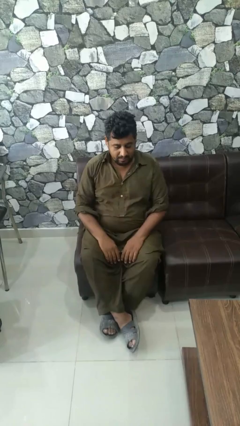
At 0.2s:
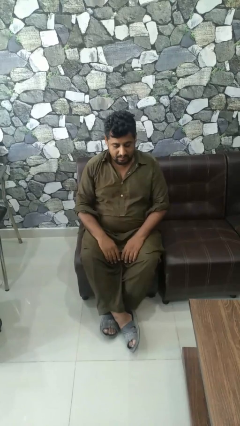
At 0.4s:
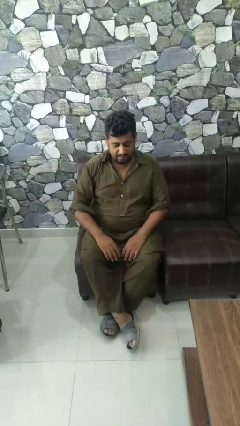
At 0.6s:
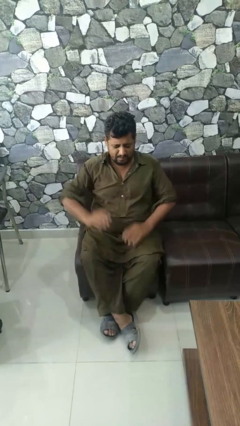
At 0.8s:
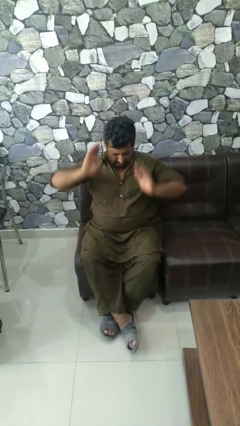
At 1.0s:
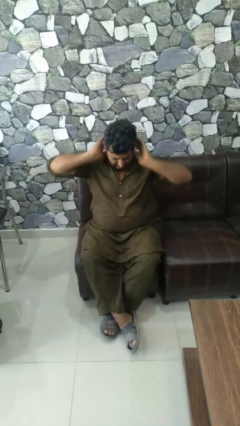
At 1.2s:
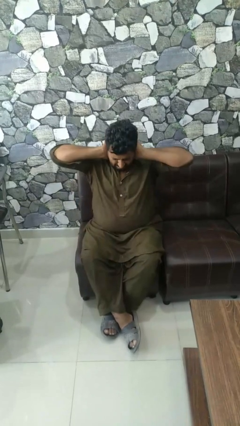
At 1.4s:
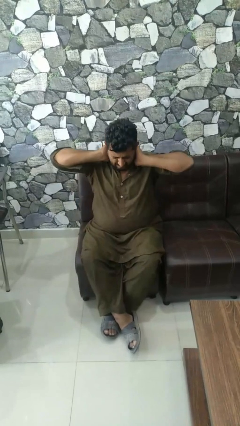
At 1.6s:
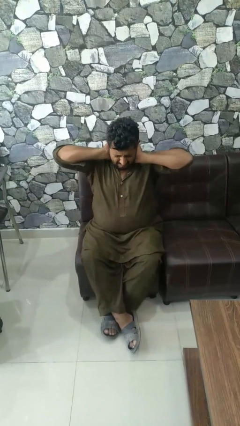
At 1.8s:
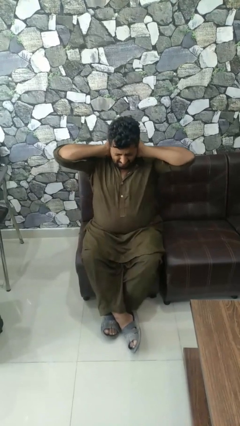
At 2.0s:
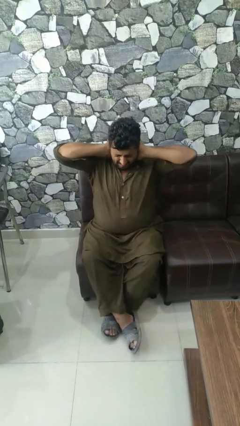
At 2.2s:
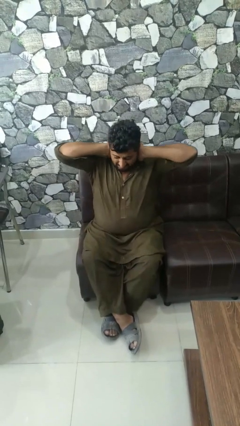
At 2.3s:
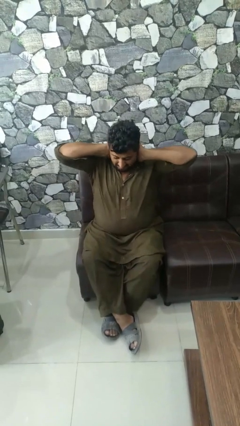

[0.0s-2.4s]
person rubs neck

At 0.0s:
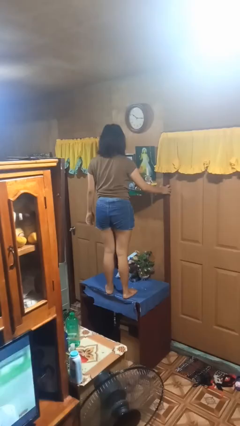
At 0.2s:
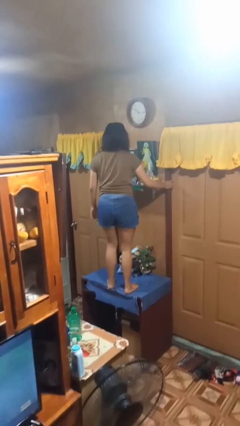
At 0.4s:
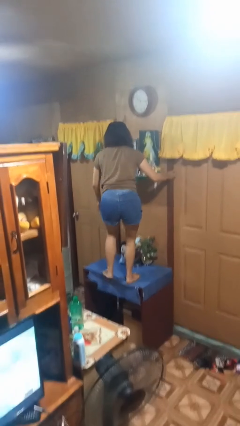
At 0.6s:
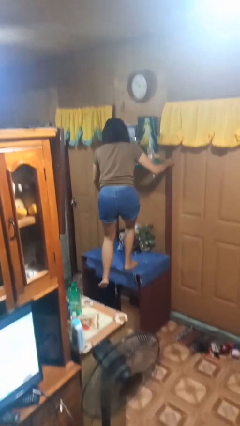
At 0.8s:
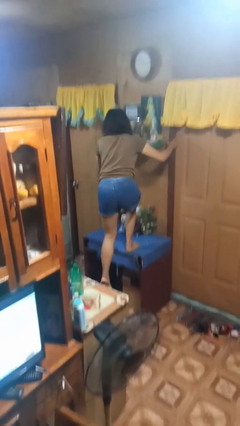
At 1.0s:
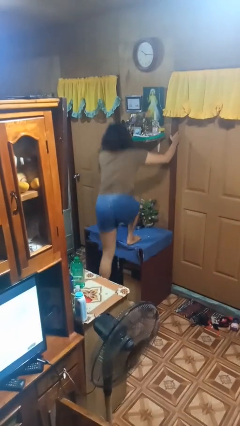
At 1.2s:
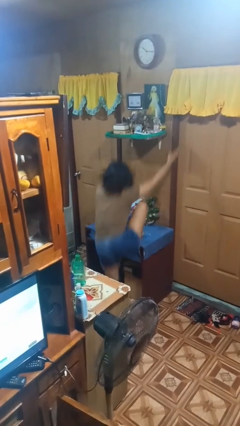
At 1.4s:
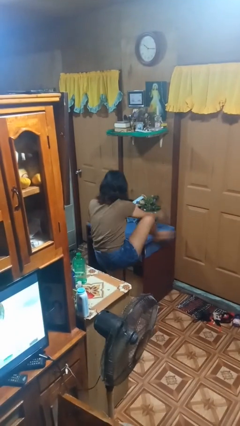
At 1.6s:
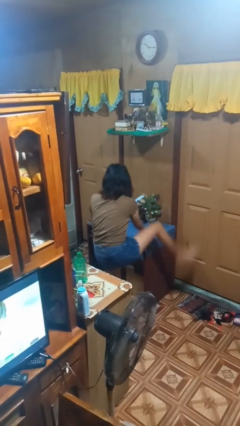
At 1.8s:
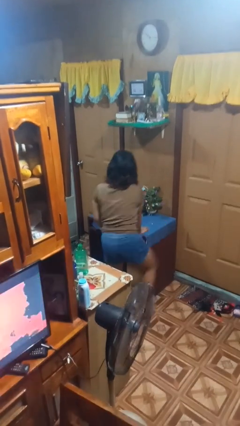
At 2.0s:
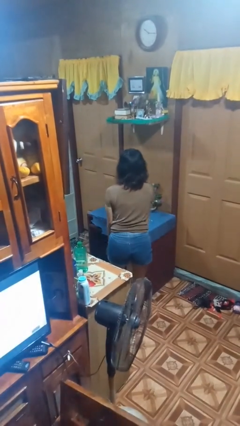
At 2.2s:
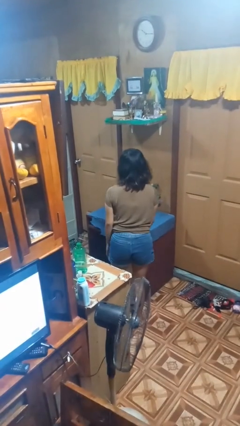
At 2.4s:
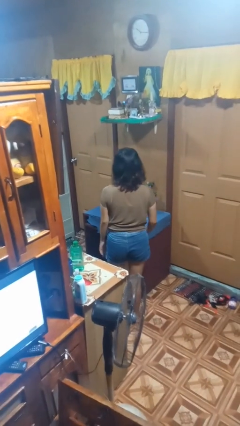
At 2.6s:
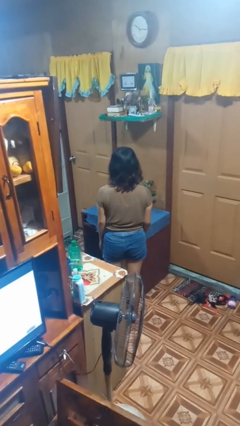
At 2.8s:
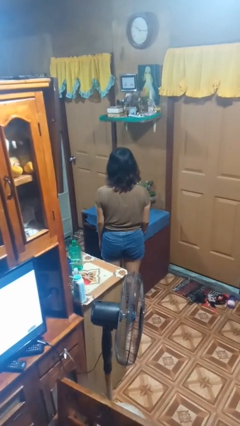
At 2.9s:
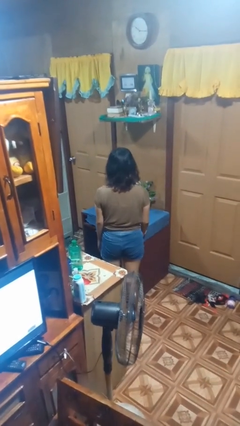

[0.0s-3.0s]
person climbs off table

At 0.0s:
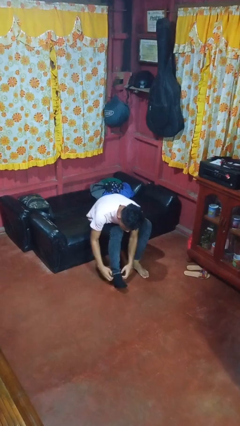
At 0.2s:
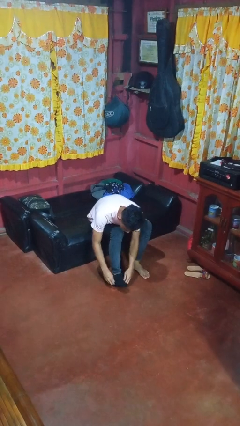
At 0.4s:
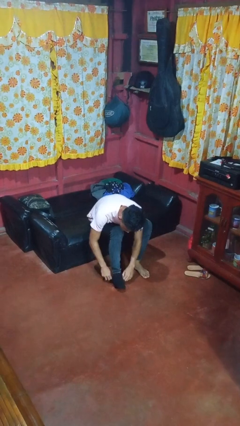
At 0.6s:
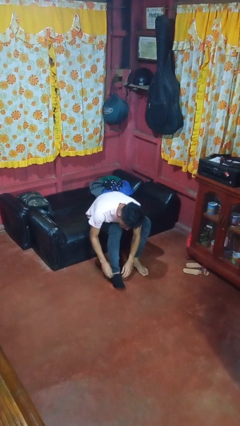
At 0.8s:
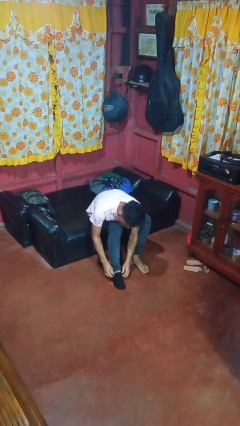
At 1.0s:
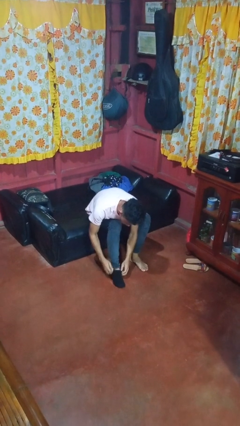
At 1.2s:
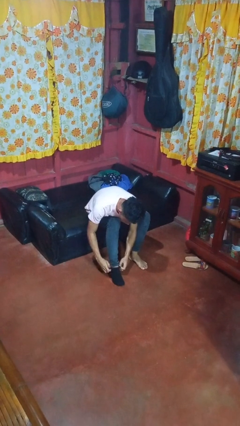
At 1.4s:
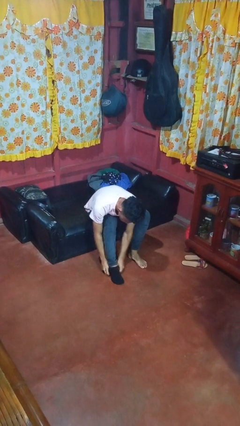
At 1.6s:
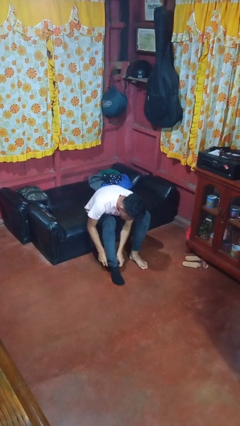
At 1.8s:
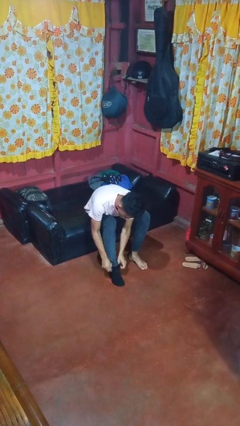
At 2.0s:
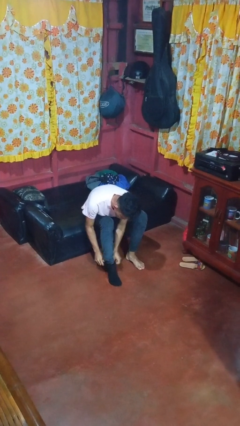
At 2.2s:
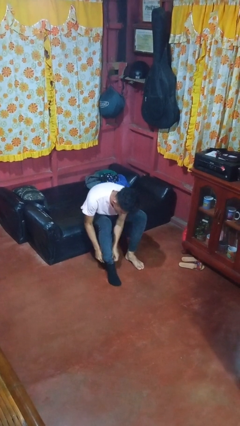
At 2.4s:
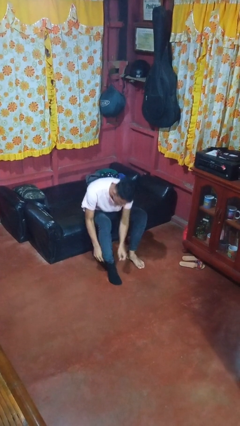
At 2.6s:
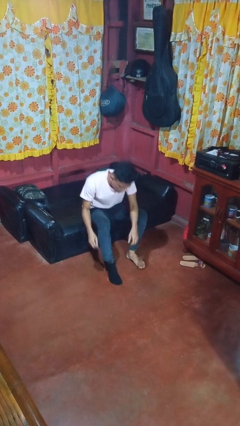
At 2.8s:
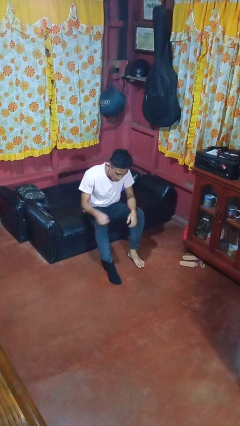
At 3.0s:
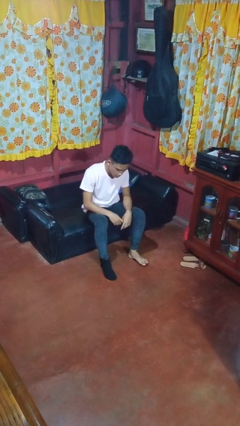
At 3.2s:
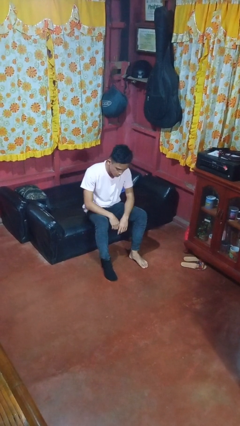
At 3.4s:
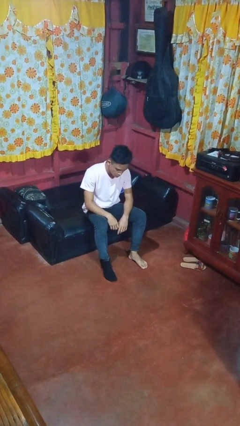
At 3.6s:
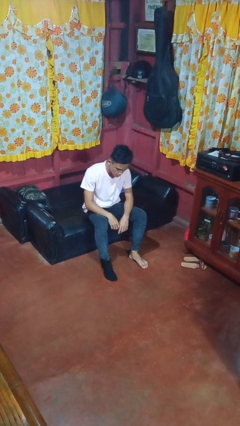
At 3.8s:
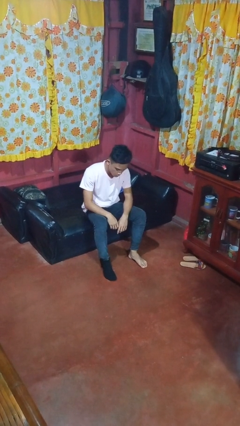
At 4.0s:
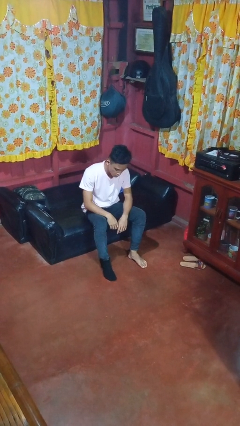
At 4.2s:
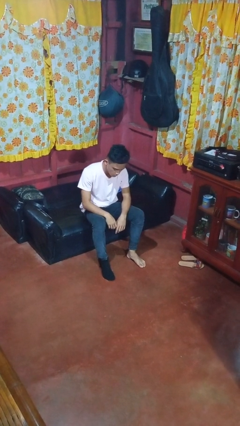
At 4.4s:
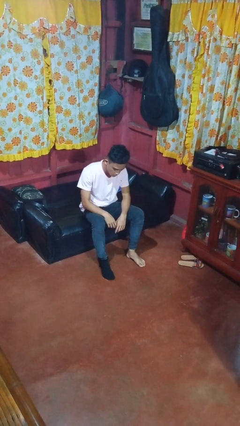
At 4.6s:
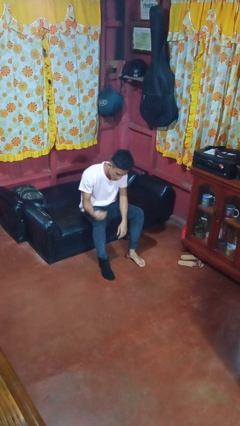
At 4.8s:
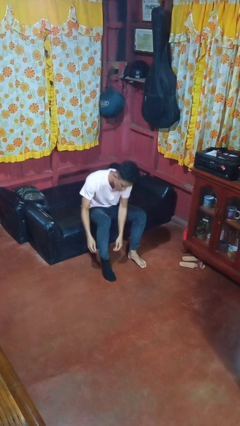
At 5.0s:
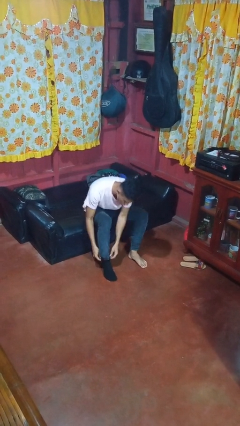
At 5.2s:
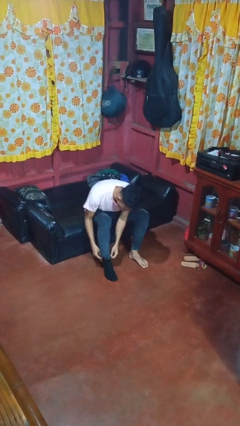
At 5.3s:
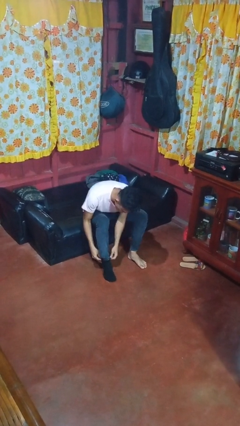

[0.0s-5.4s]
person puts on socks

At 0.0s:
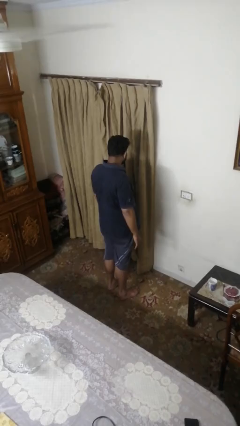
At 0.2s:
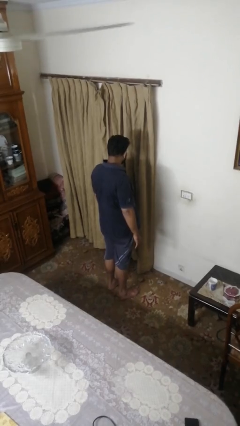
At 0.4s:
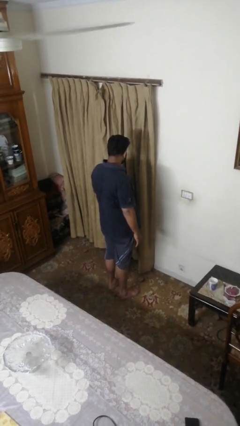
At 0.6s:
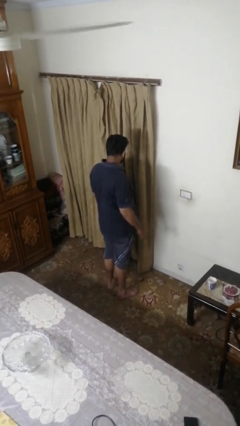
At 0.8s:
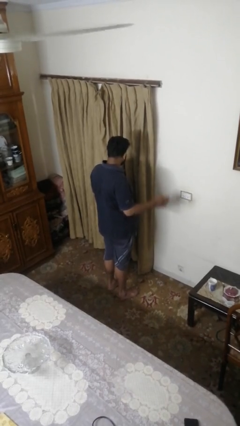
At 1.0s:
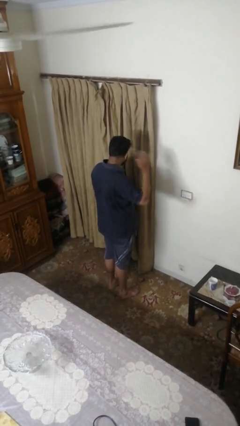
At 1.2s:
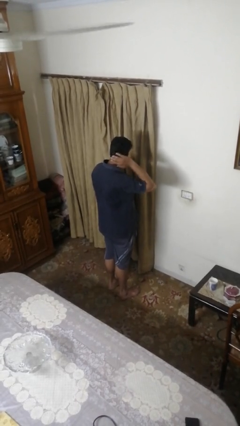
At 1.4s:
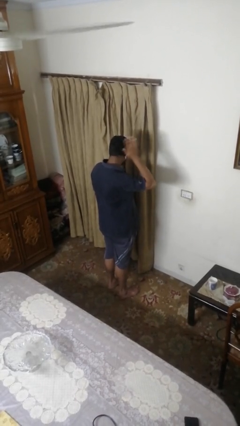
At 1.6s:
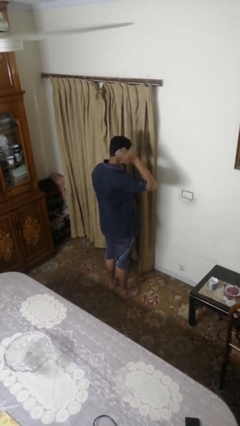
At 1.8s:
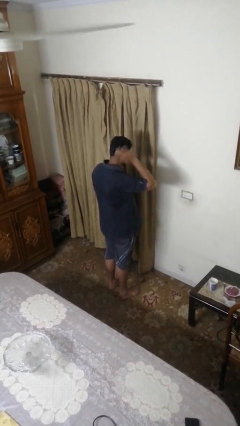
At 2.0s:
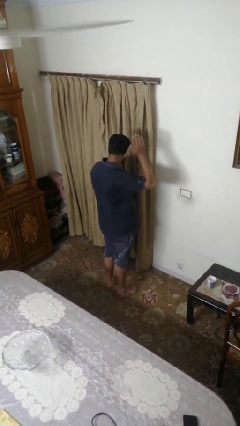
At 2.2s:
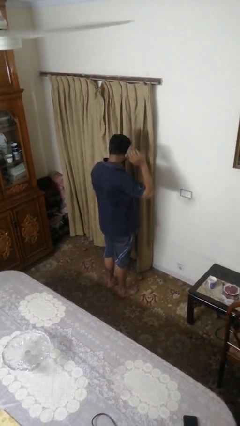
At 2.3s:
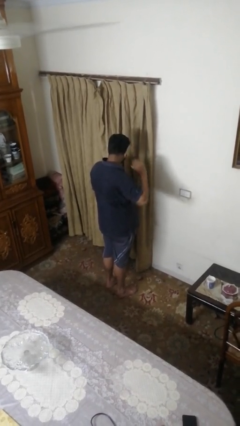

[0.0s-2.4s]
person strokes hair

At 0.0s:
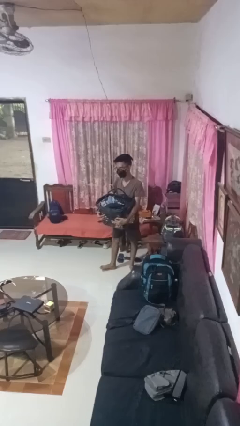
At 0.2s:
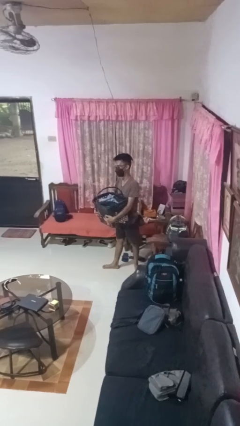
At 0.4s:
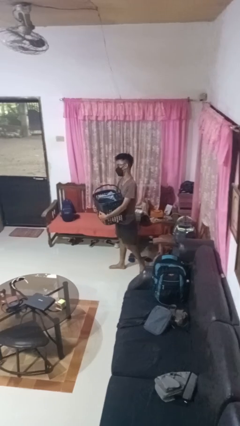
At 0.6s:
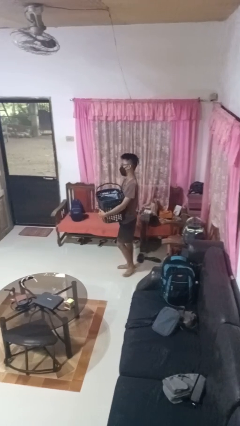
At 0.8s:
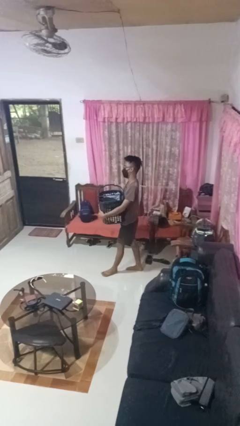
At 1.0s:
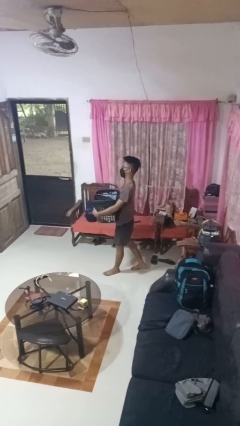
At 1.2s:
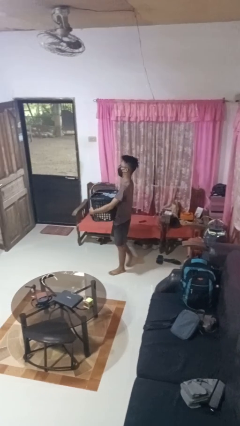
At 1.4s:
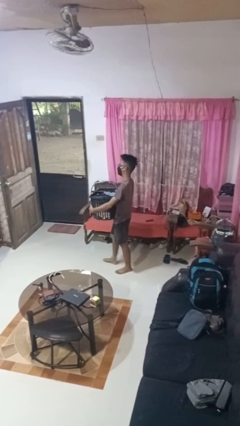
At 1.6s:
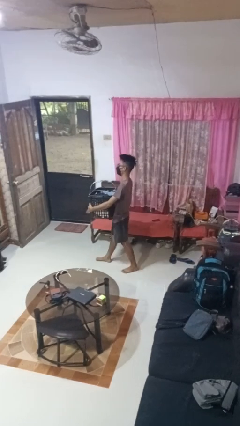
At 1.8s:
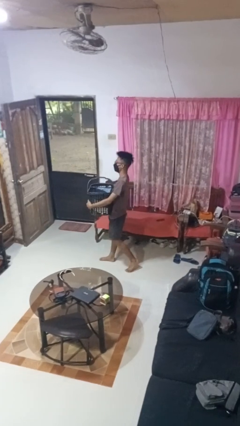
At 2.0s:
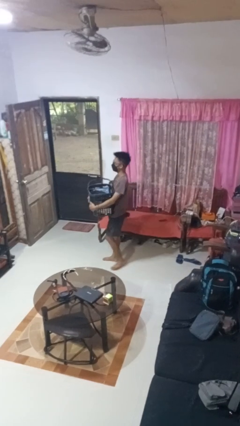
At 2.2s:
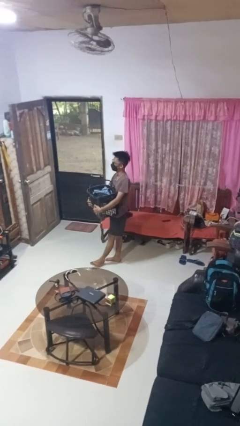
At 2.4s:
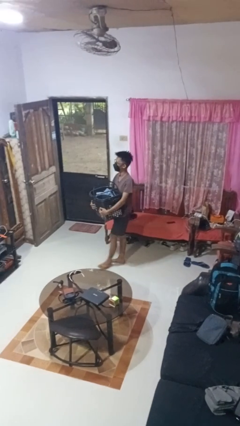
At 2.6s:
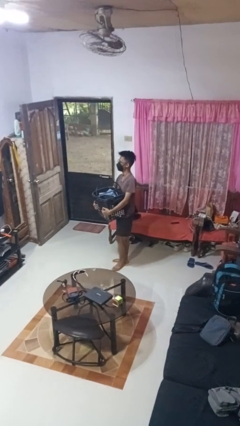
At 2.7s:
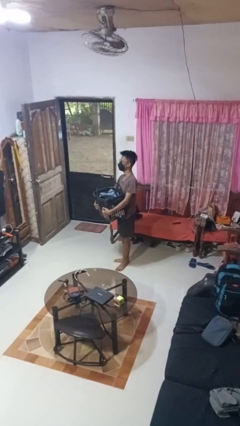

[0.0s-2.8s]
person carries laundry basket

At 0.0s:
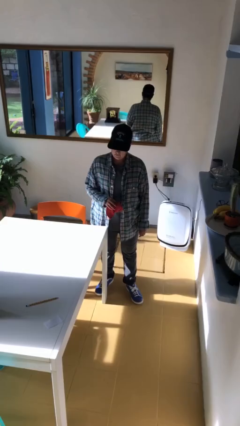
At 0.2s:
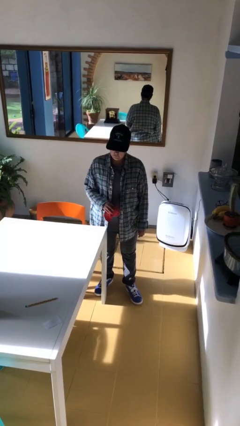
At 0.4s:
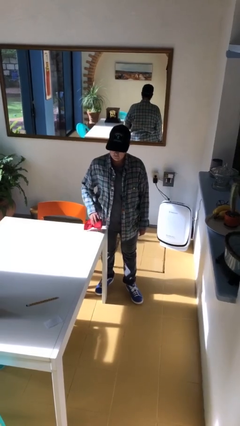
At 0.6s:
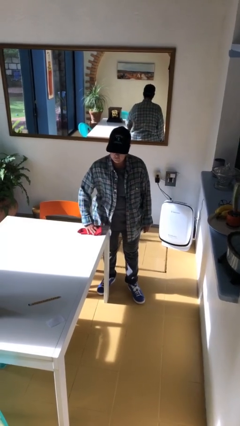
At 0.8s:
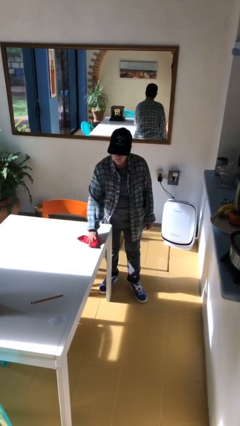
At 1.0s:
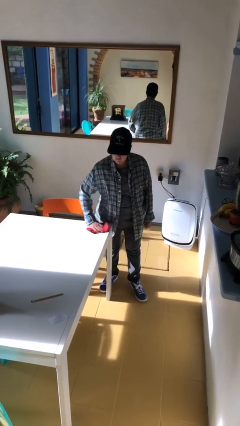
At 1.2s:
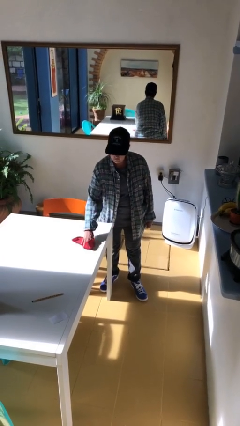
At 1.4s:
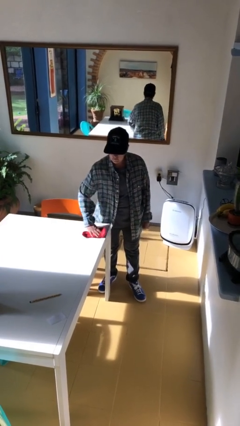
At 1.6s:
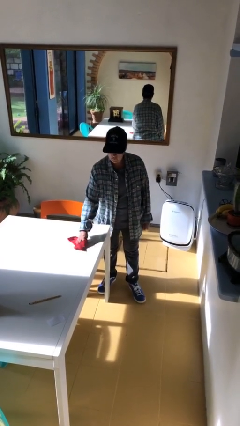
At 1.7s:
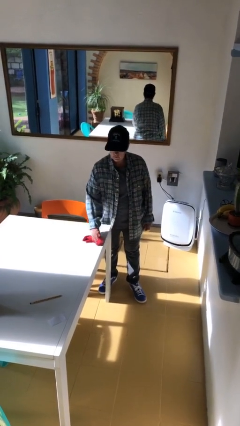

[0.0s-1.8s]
person cleans table with rag

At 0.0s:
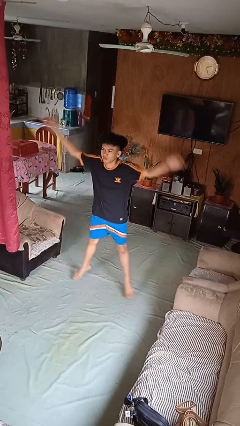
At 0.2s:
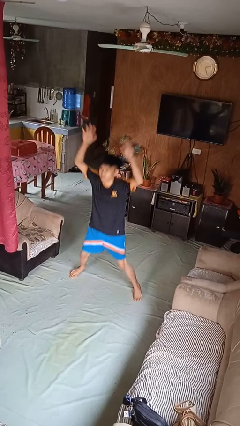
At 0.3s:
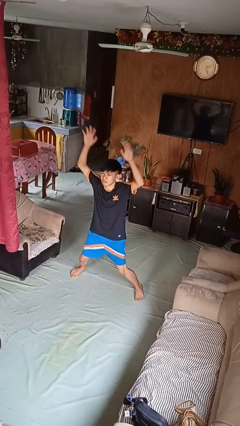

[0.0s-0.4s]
person exercises with jumping jacks
